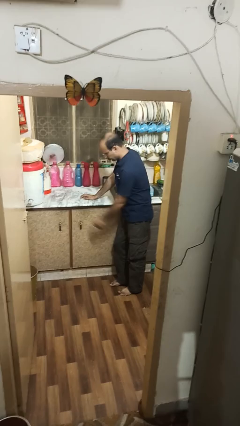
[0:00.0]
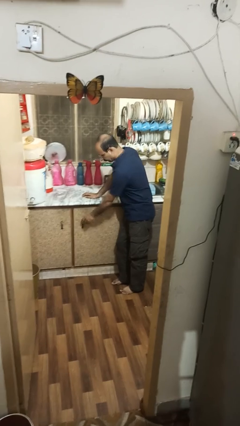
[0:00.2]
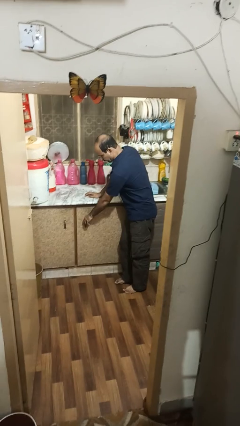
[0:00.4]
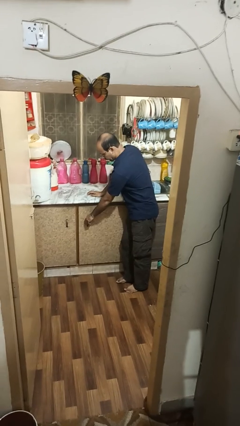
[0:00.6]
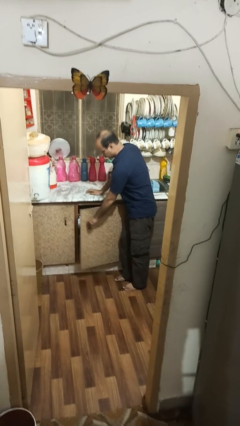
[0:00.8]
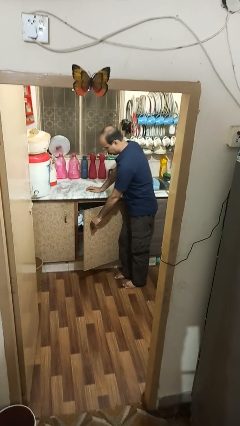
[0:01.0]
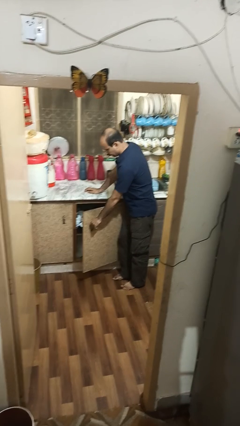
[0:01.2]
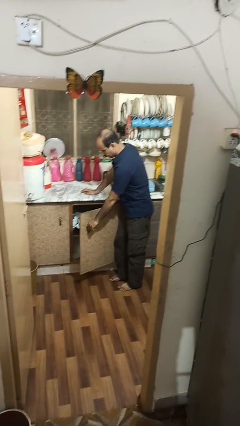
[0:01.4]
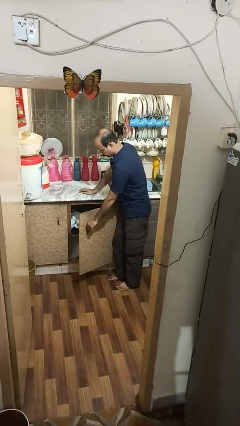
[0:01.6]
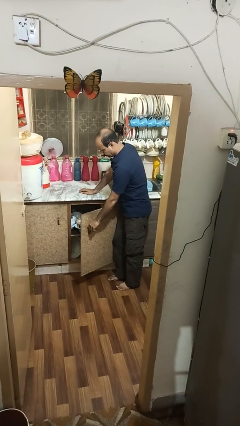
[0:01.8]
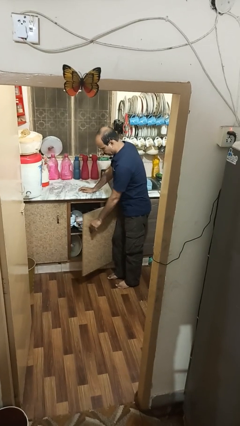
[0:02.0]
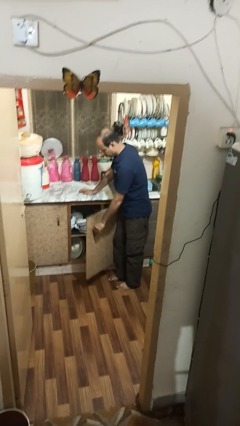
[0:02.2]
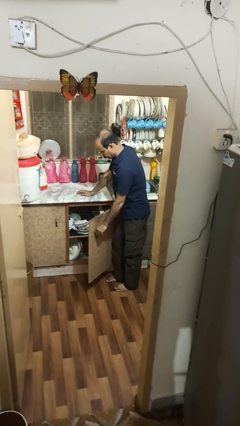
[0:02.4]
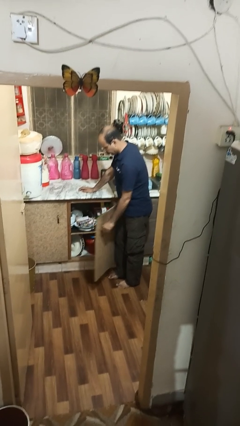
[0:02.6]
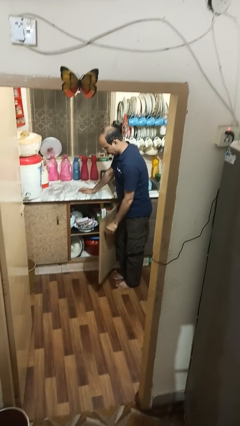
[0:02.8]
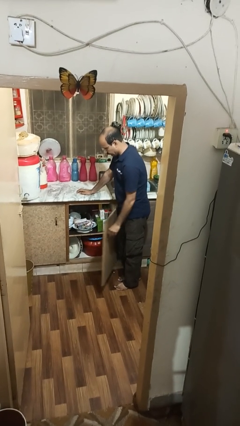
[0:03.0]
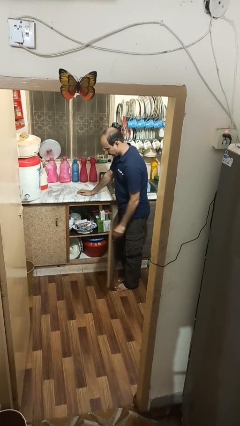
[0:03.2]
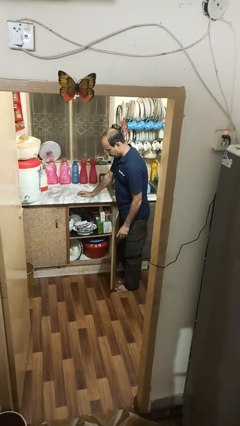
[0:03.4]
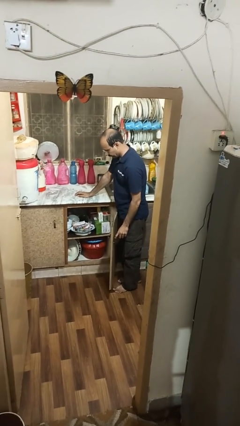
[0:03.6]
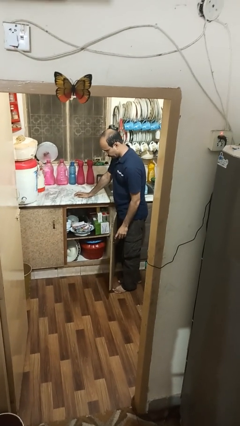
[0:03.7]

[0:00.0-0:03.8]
person opens cabinet

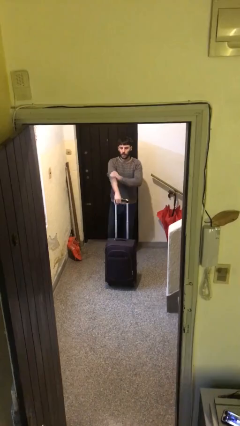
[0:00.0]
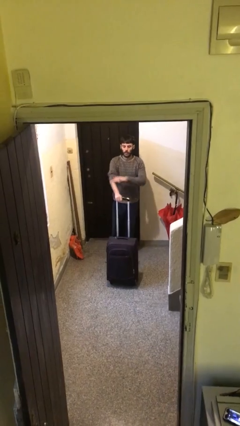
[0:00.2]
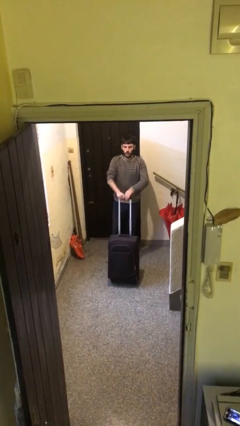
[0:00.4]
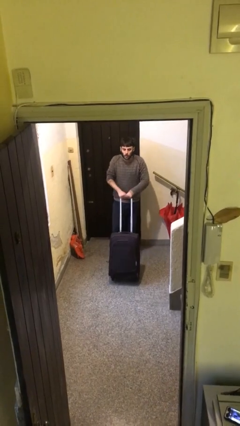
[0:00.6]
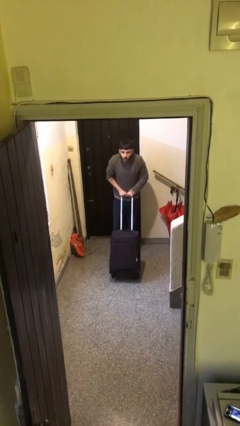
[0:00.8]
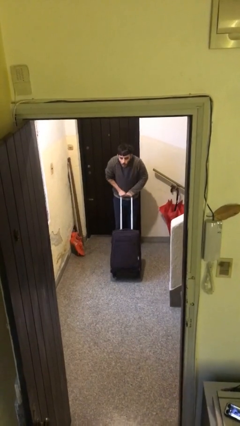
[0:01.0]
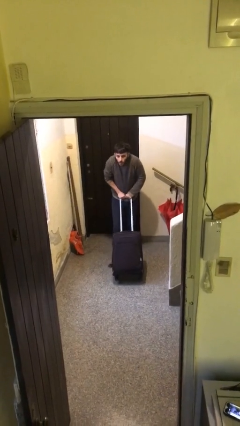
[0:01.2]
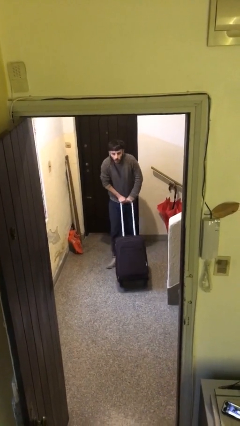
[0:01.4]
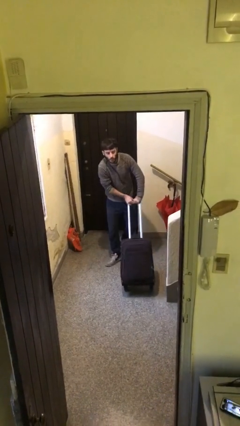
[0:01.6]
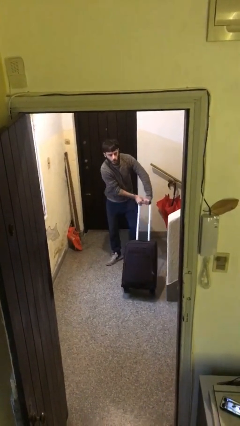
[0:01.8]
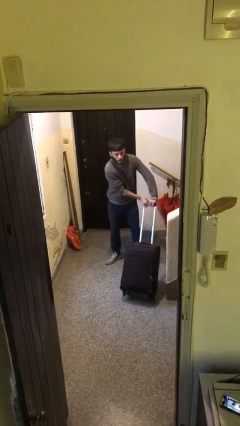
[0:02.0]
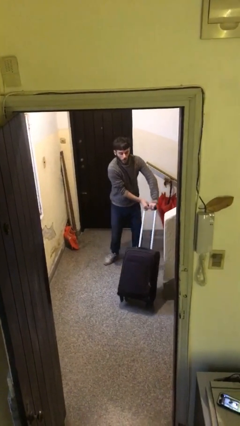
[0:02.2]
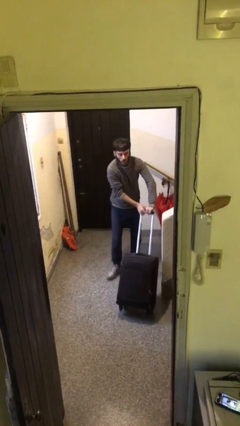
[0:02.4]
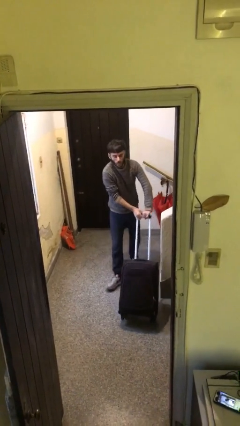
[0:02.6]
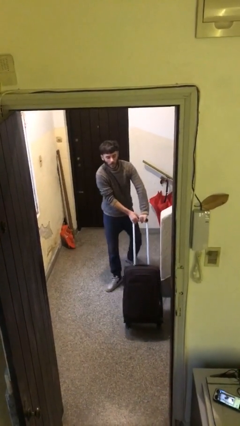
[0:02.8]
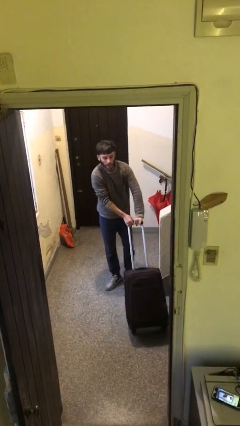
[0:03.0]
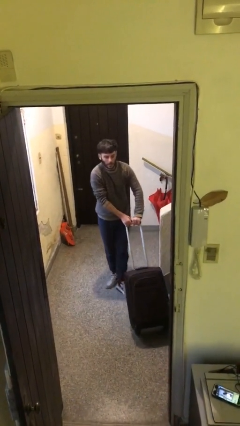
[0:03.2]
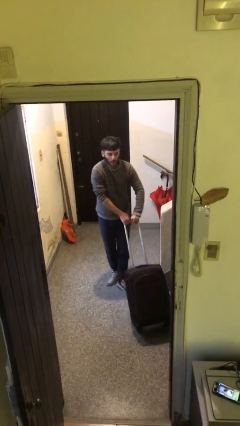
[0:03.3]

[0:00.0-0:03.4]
person pushes wheeled cart

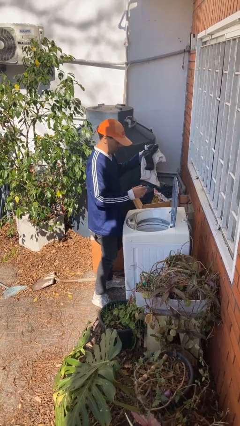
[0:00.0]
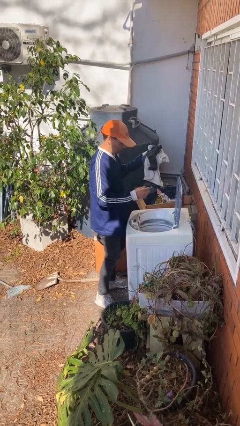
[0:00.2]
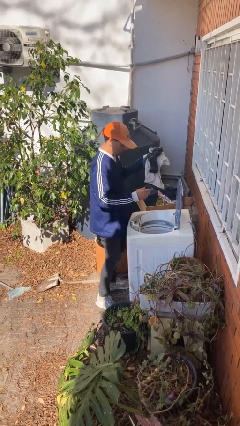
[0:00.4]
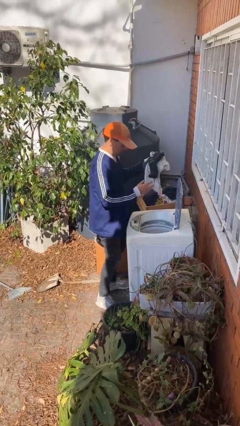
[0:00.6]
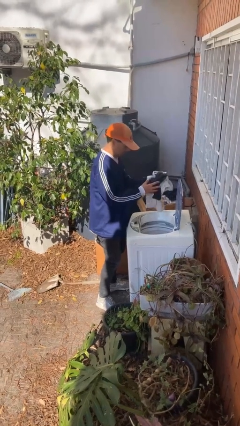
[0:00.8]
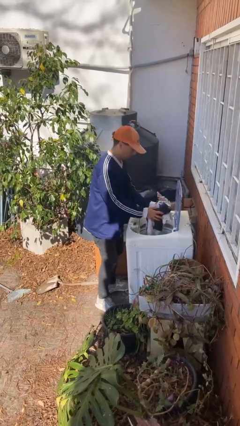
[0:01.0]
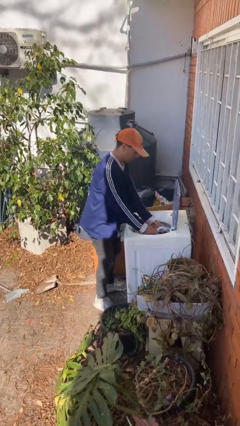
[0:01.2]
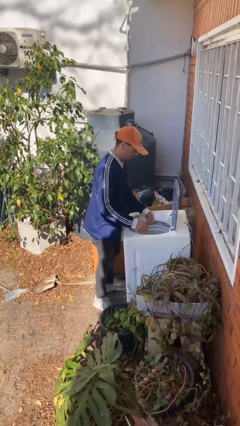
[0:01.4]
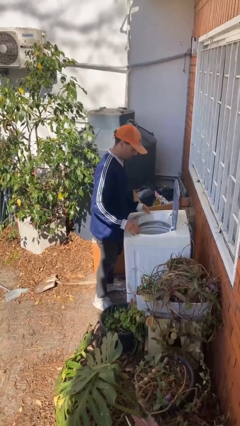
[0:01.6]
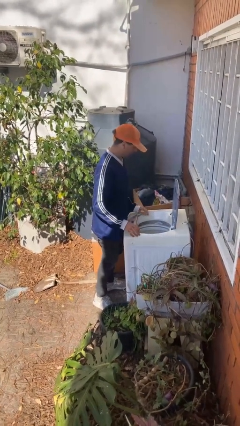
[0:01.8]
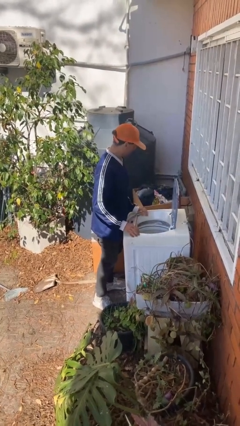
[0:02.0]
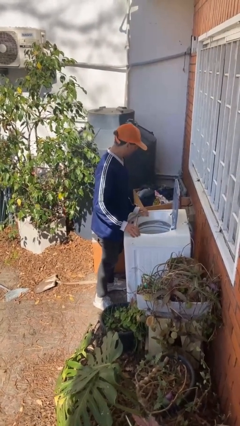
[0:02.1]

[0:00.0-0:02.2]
person loads clotheswasher

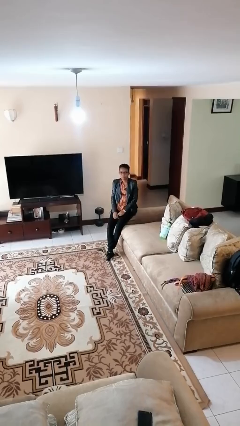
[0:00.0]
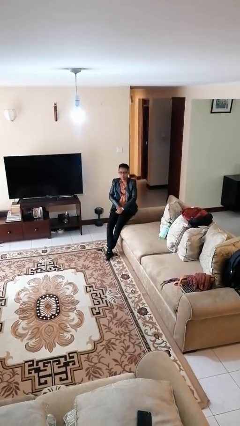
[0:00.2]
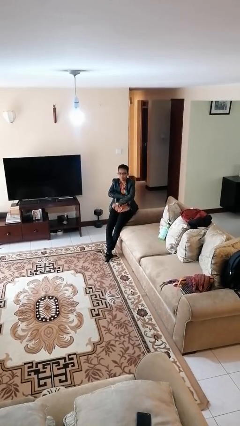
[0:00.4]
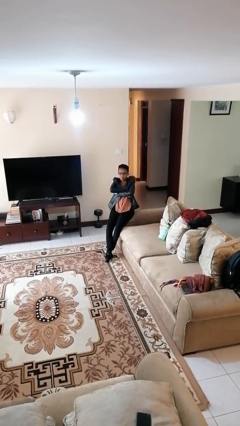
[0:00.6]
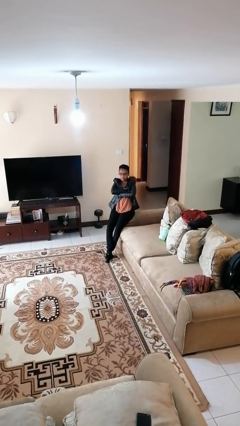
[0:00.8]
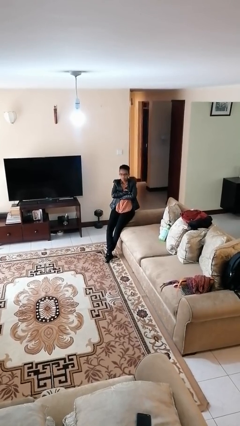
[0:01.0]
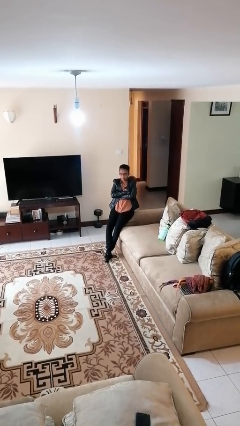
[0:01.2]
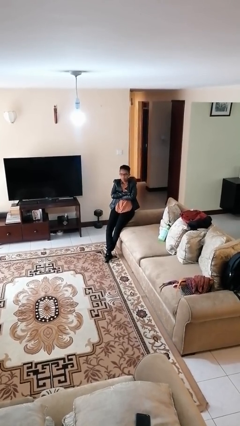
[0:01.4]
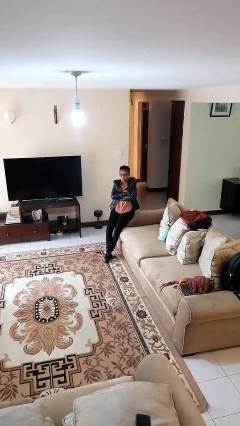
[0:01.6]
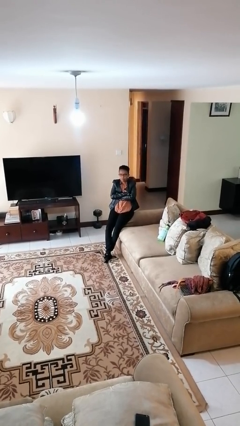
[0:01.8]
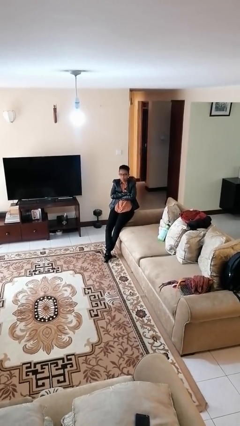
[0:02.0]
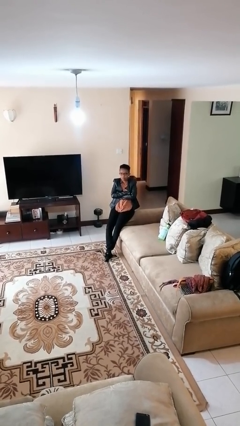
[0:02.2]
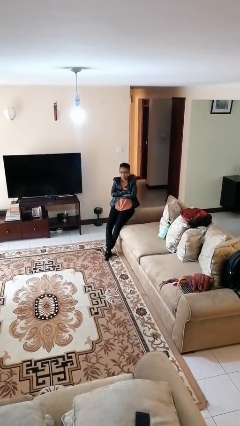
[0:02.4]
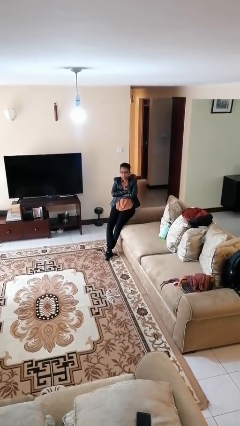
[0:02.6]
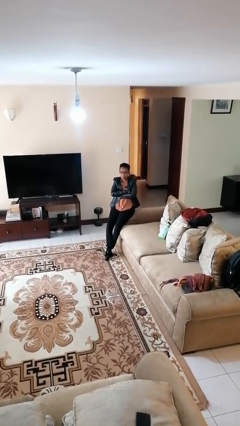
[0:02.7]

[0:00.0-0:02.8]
person crosses arms

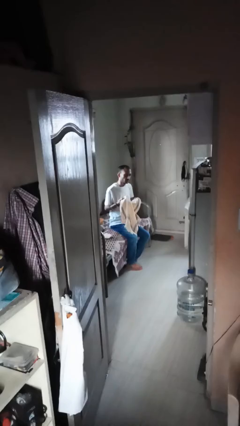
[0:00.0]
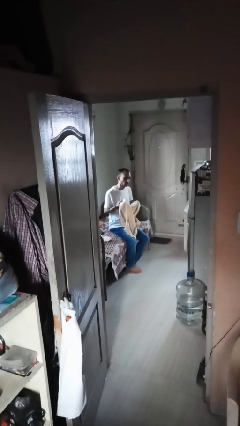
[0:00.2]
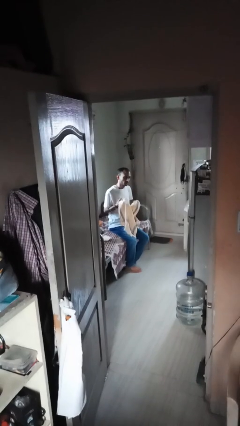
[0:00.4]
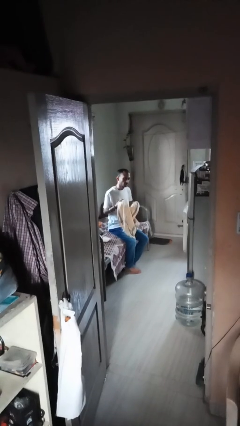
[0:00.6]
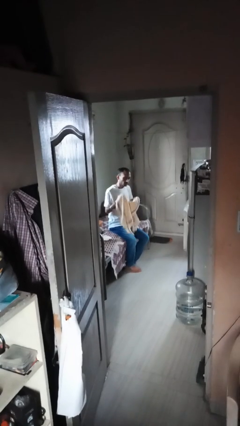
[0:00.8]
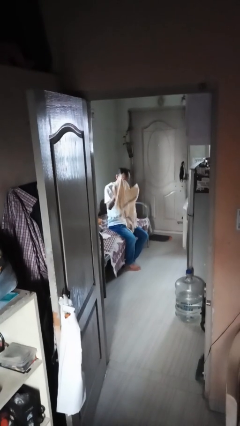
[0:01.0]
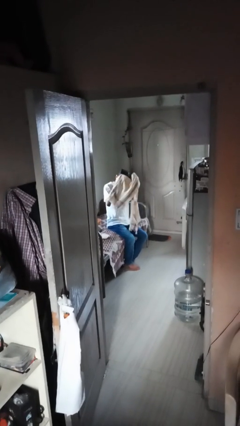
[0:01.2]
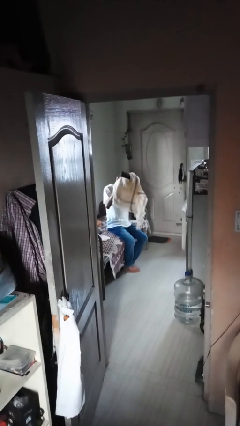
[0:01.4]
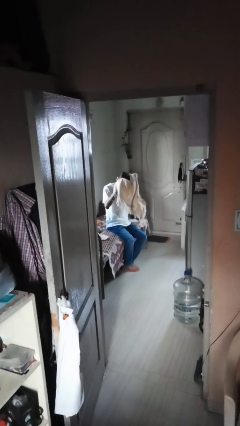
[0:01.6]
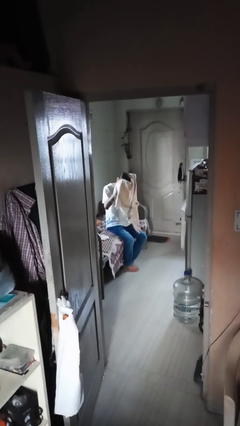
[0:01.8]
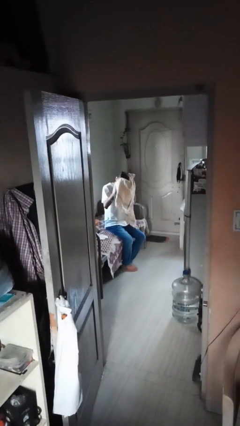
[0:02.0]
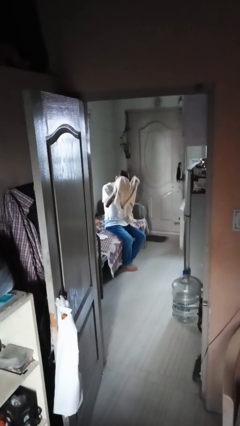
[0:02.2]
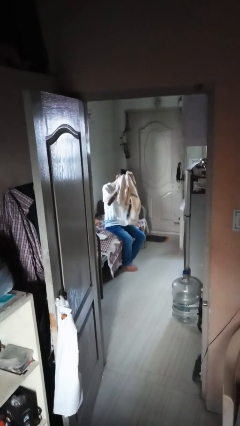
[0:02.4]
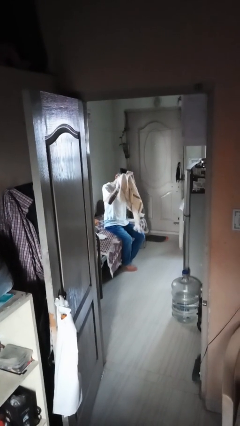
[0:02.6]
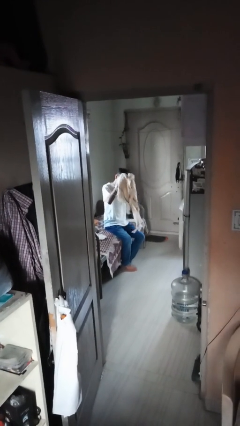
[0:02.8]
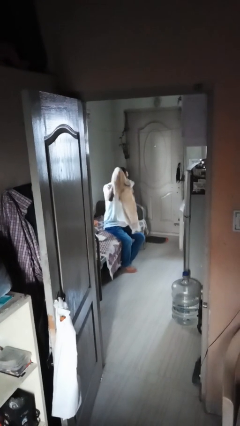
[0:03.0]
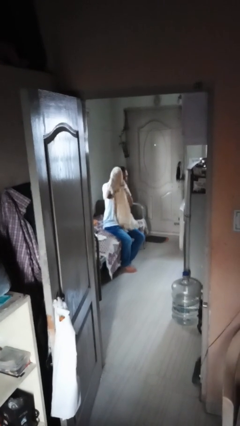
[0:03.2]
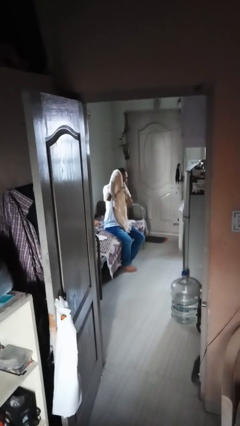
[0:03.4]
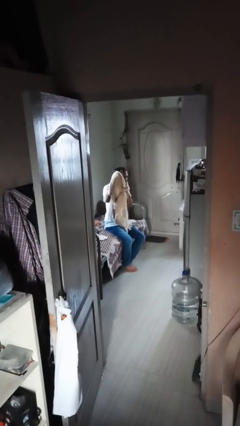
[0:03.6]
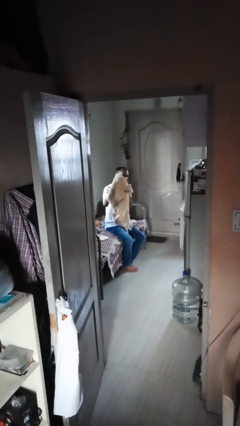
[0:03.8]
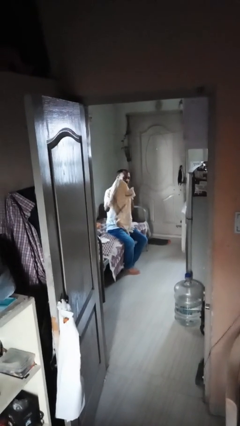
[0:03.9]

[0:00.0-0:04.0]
person dries hair with towel

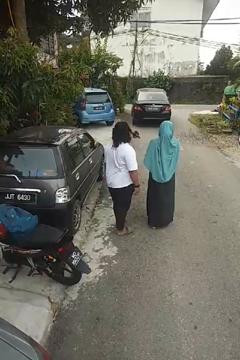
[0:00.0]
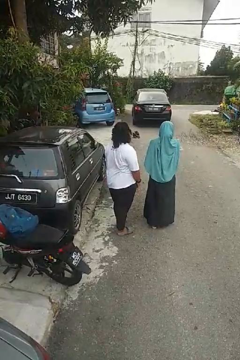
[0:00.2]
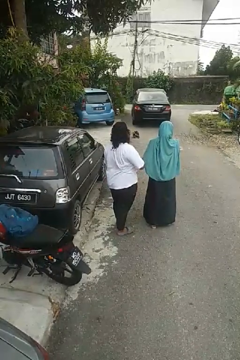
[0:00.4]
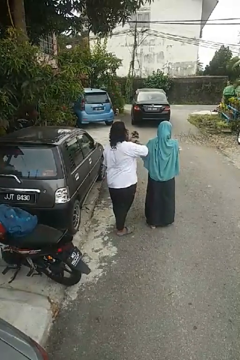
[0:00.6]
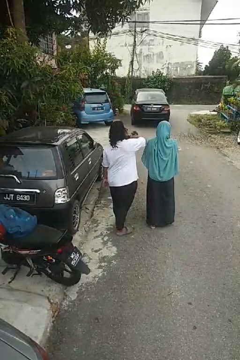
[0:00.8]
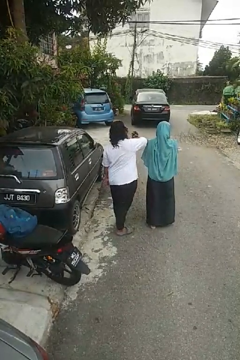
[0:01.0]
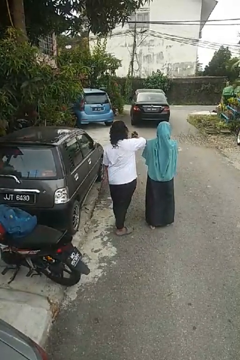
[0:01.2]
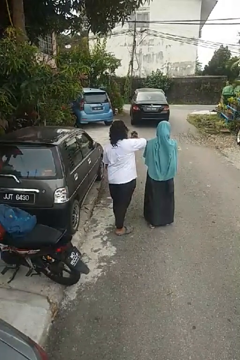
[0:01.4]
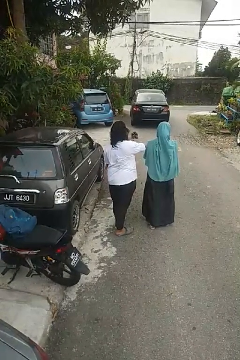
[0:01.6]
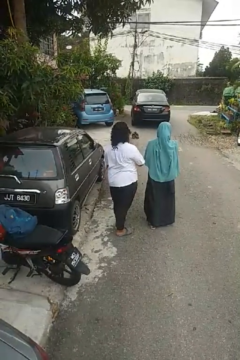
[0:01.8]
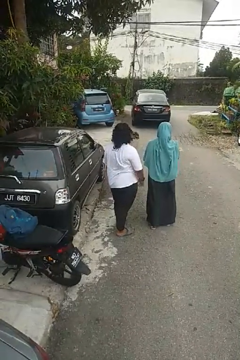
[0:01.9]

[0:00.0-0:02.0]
person nudges person with elbow
